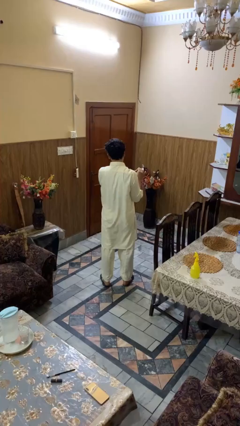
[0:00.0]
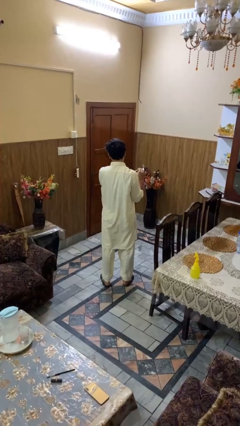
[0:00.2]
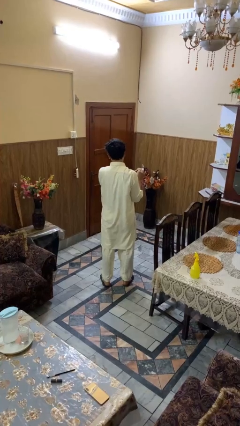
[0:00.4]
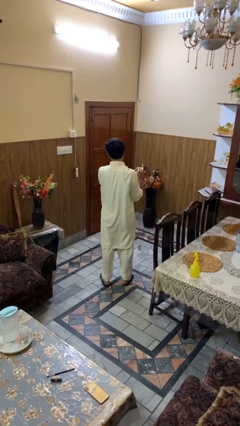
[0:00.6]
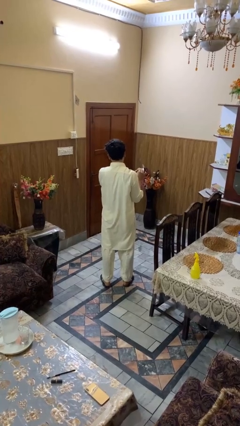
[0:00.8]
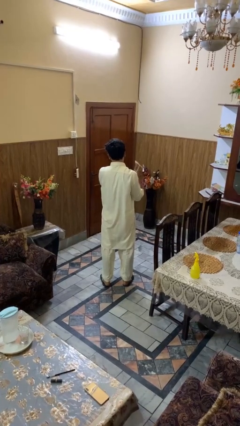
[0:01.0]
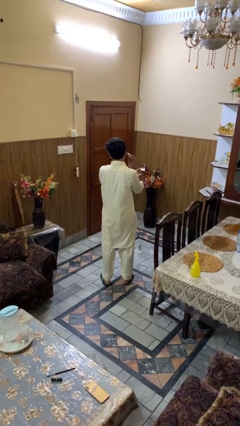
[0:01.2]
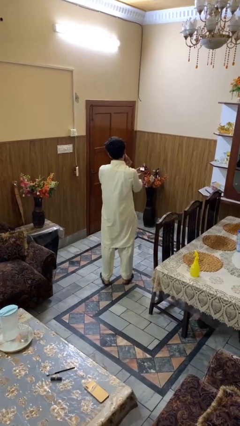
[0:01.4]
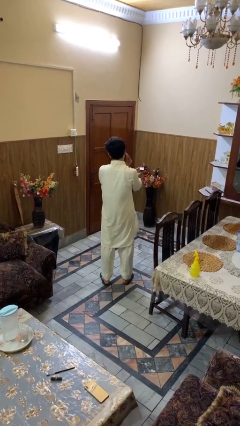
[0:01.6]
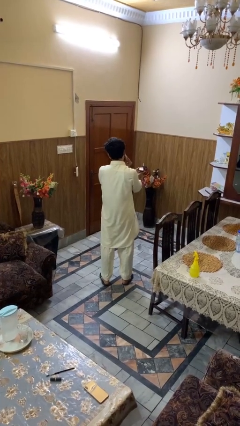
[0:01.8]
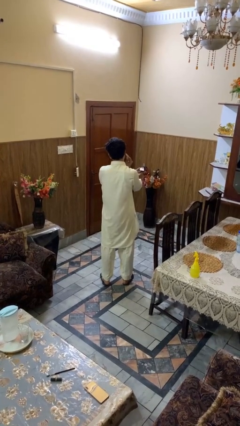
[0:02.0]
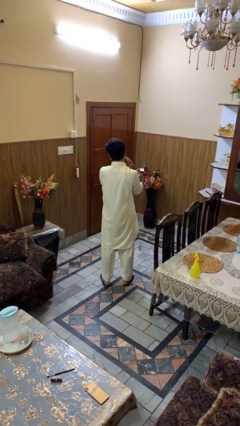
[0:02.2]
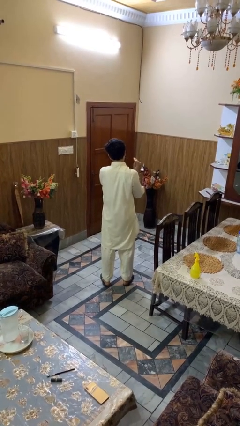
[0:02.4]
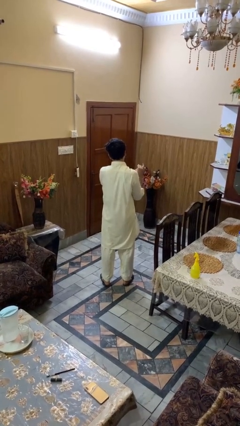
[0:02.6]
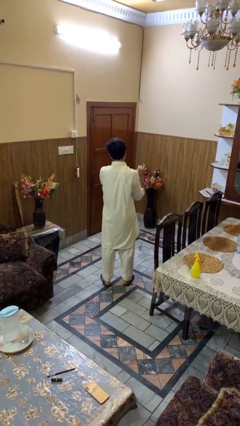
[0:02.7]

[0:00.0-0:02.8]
person applies foundation makeup

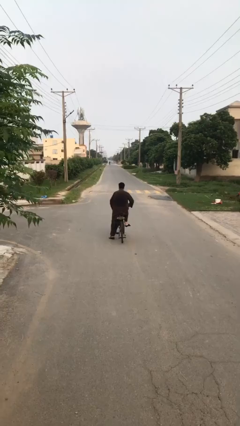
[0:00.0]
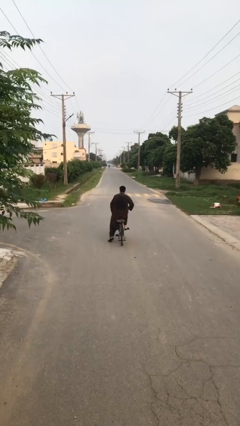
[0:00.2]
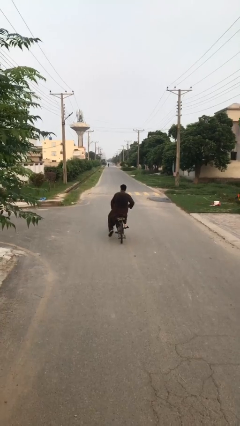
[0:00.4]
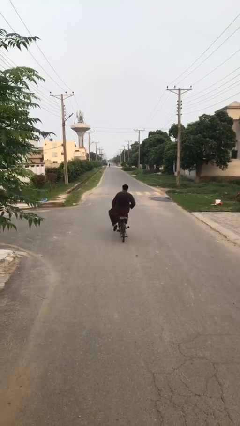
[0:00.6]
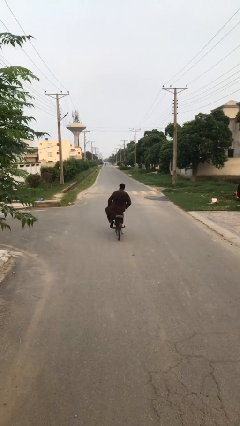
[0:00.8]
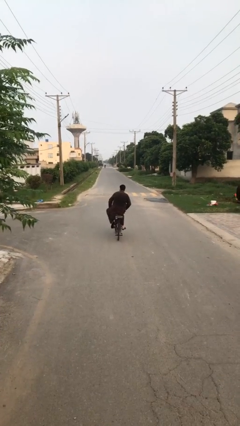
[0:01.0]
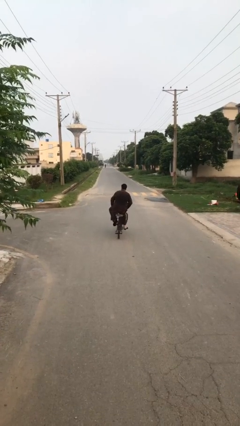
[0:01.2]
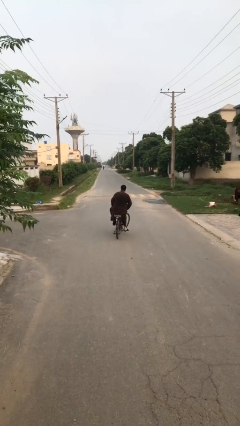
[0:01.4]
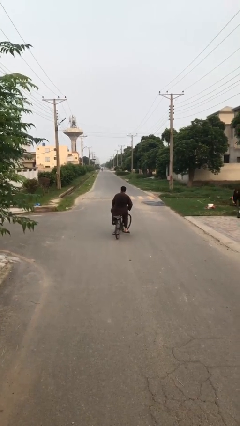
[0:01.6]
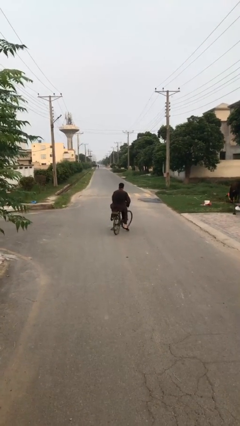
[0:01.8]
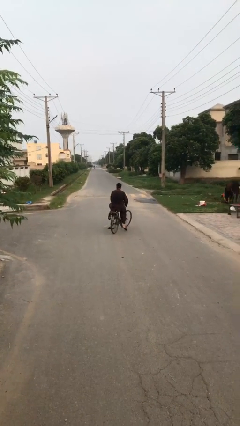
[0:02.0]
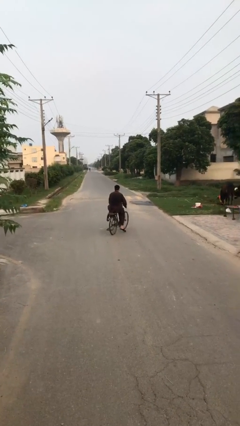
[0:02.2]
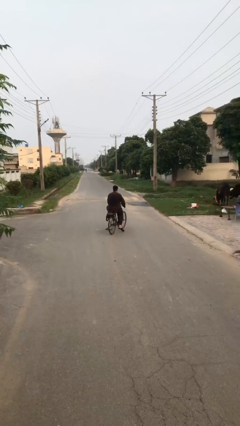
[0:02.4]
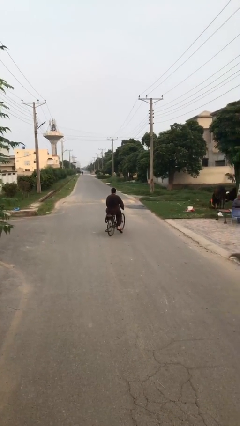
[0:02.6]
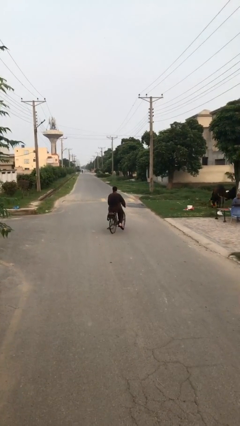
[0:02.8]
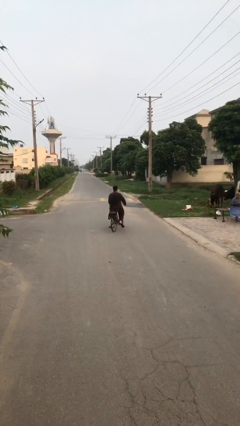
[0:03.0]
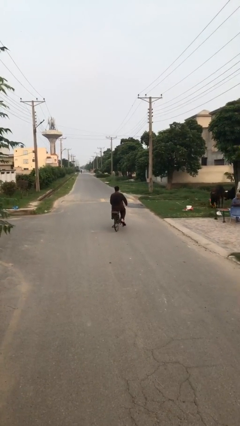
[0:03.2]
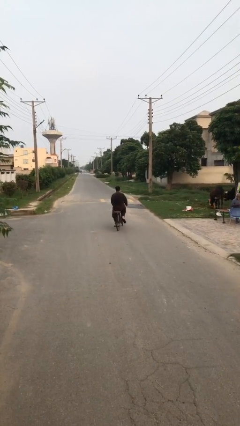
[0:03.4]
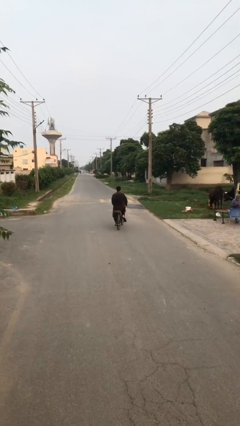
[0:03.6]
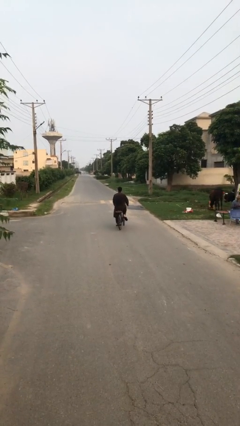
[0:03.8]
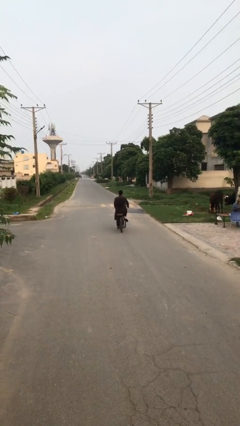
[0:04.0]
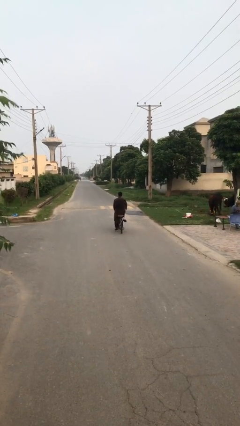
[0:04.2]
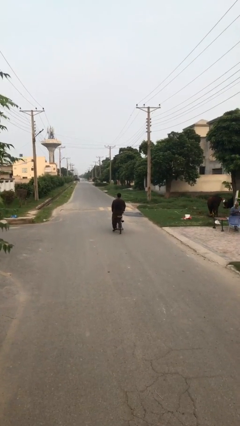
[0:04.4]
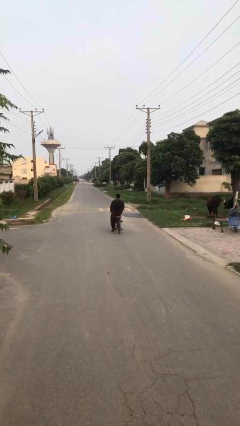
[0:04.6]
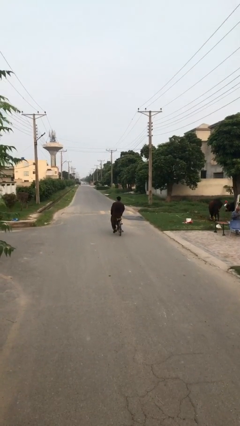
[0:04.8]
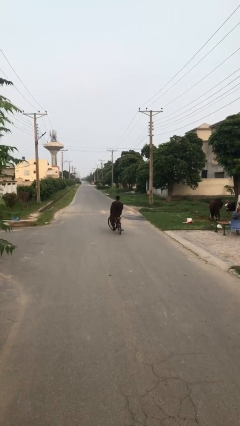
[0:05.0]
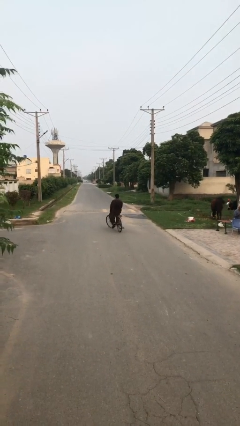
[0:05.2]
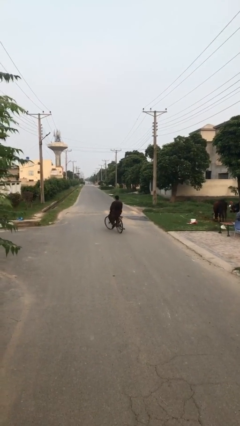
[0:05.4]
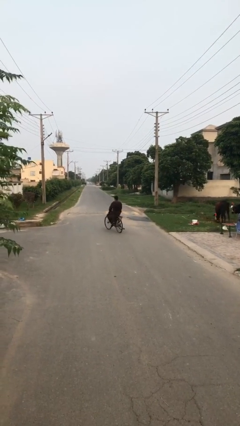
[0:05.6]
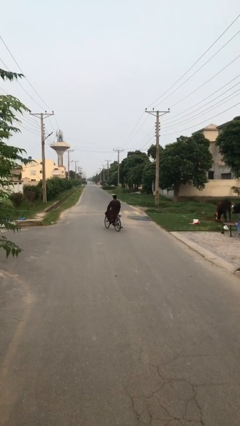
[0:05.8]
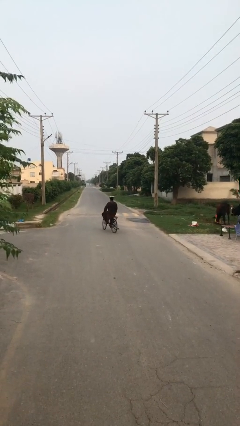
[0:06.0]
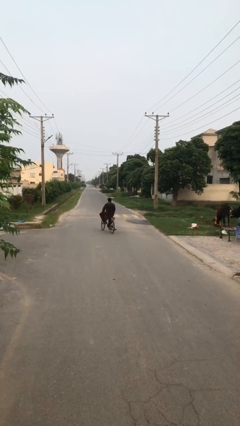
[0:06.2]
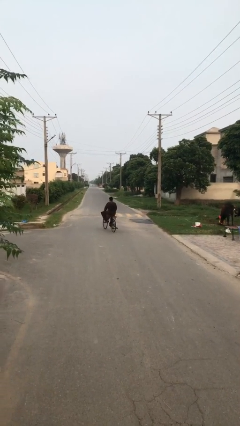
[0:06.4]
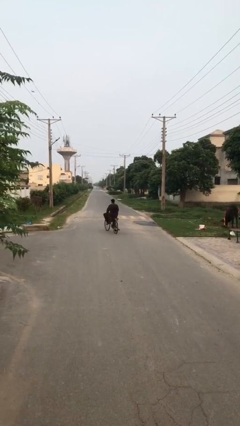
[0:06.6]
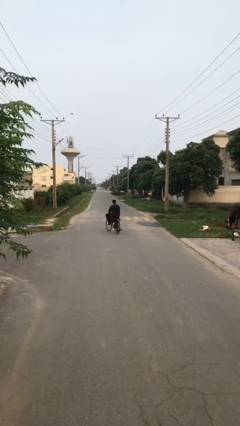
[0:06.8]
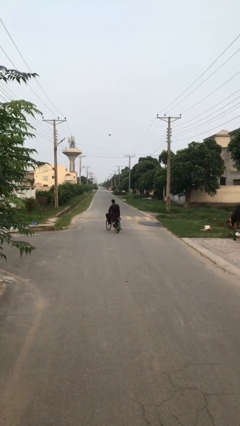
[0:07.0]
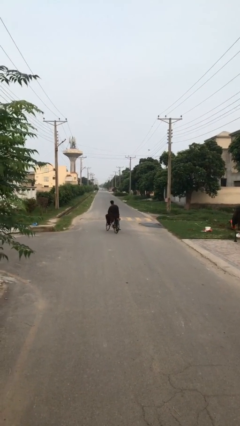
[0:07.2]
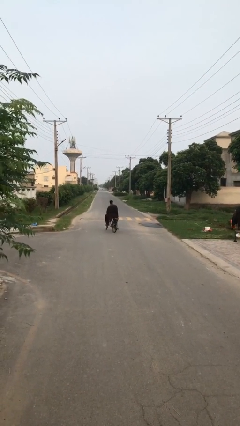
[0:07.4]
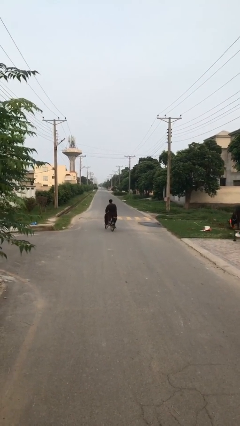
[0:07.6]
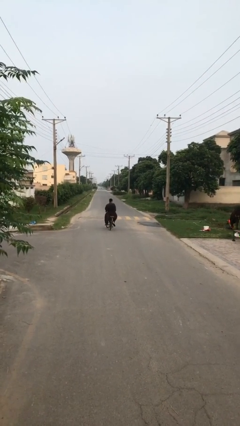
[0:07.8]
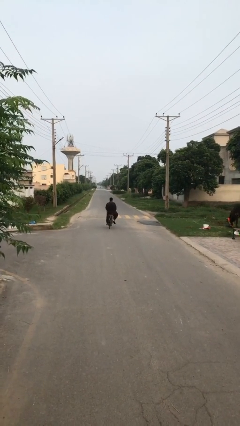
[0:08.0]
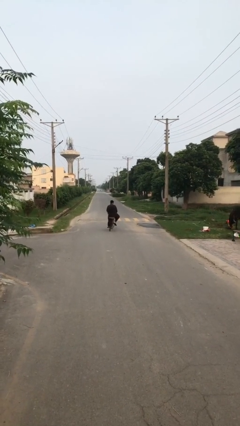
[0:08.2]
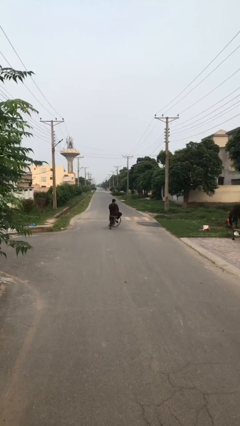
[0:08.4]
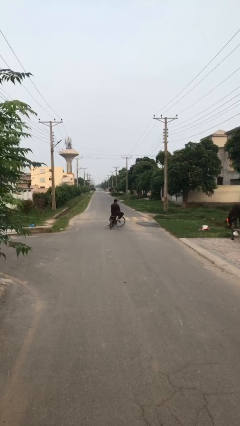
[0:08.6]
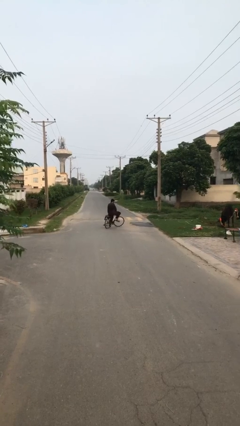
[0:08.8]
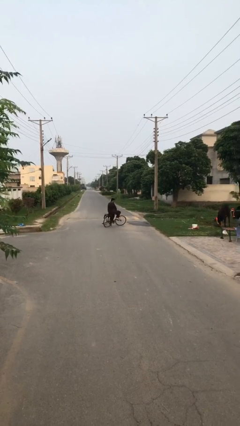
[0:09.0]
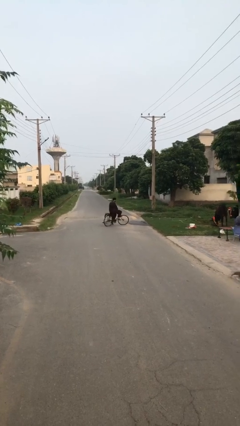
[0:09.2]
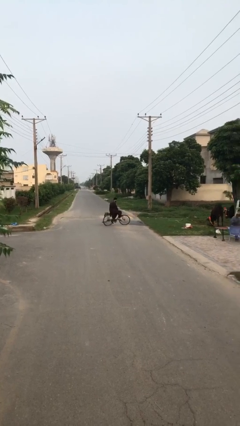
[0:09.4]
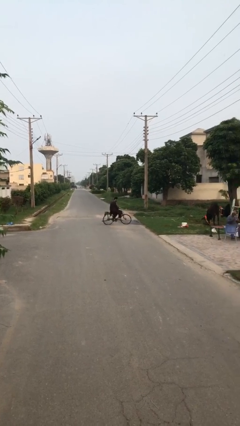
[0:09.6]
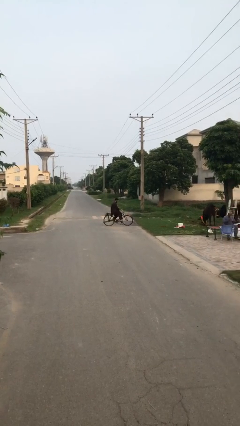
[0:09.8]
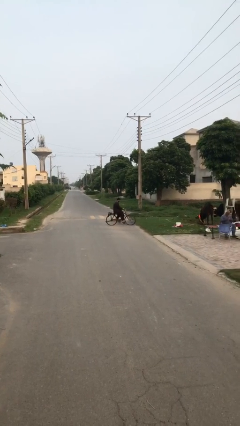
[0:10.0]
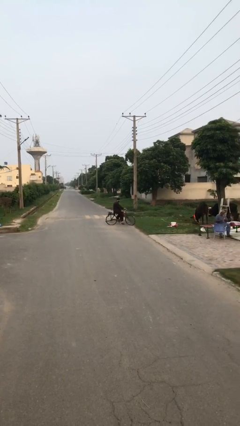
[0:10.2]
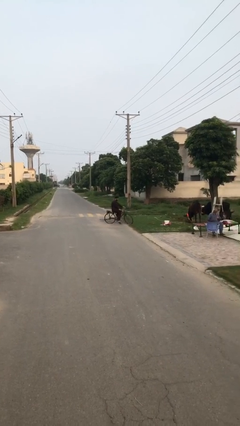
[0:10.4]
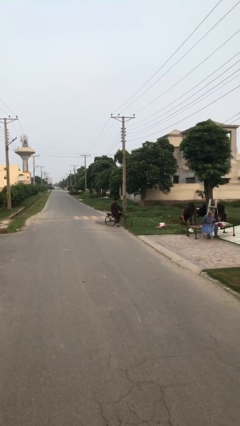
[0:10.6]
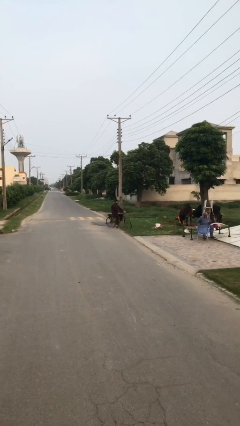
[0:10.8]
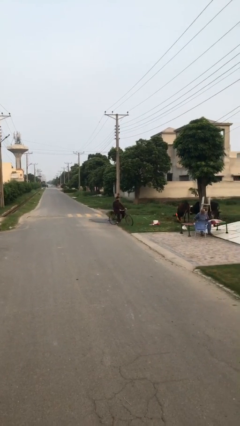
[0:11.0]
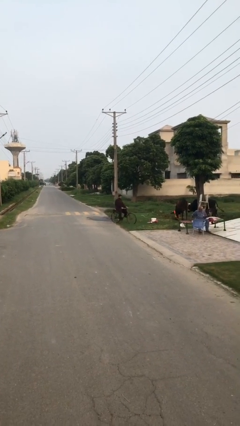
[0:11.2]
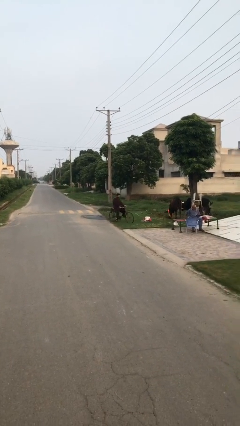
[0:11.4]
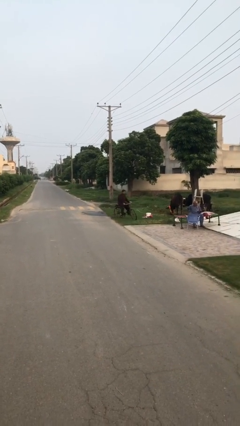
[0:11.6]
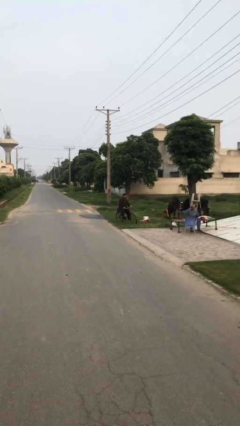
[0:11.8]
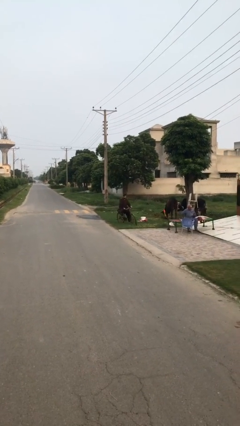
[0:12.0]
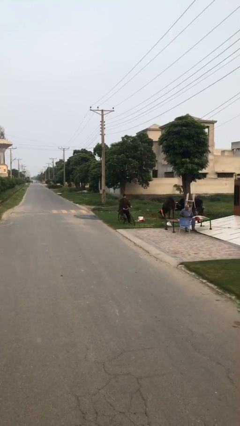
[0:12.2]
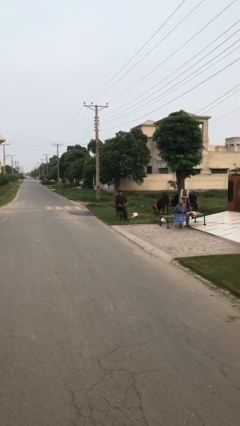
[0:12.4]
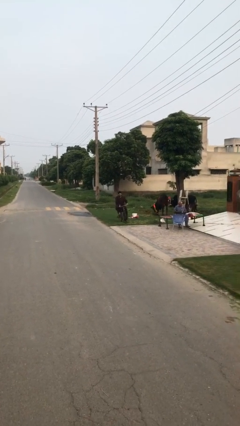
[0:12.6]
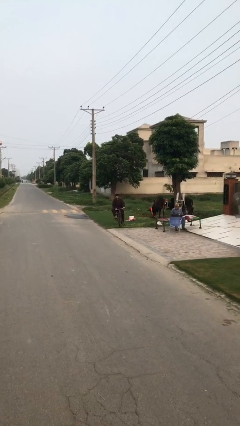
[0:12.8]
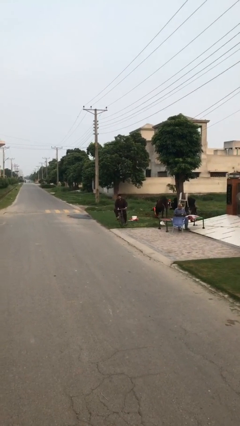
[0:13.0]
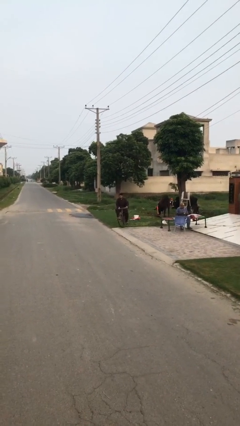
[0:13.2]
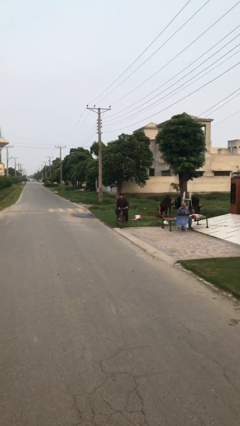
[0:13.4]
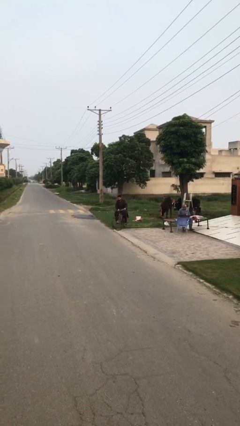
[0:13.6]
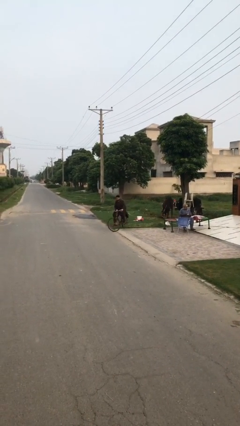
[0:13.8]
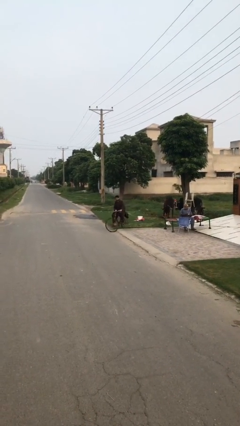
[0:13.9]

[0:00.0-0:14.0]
person rides bicycle

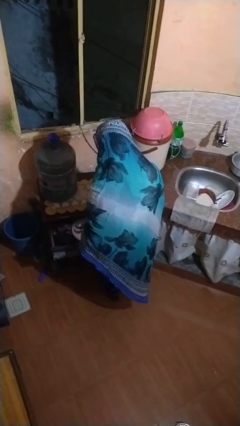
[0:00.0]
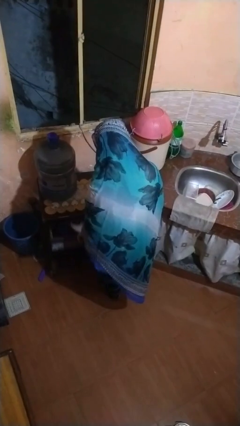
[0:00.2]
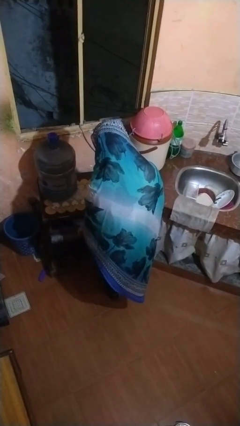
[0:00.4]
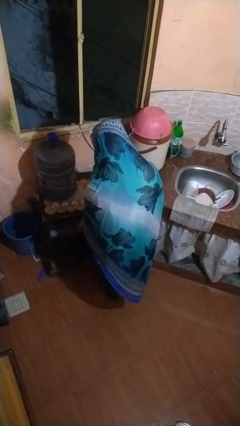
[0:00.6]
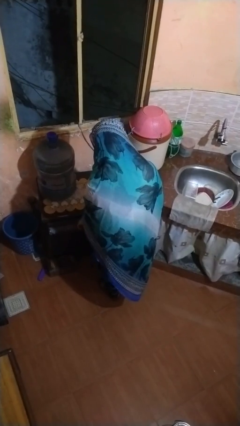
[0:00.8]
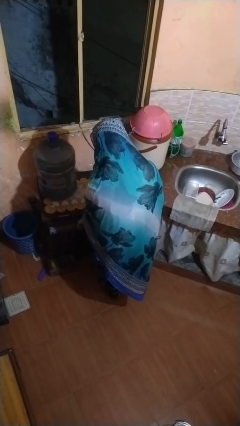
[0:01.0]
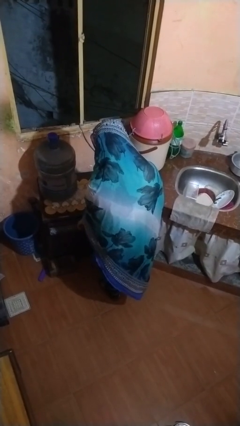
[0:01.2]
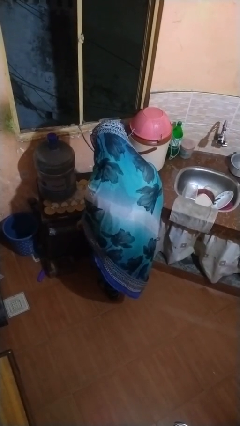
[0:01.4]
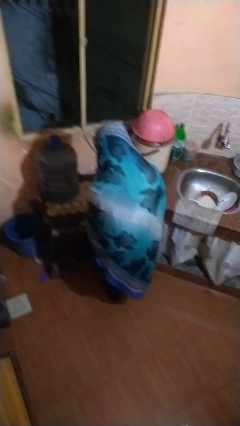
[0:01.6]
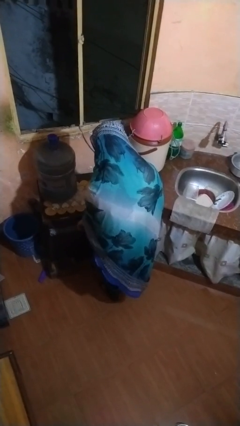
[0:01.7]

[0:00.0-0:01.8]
person closes kitchen drawer
